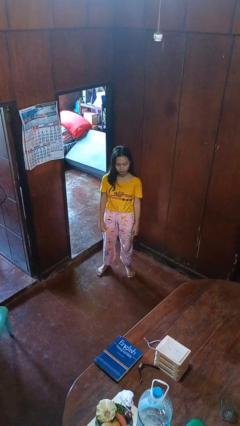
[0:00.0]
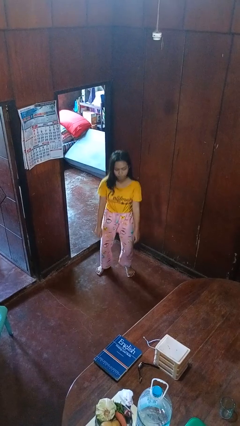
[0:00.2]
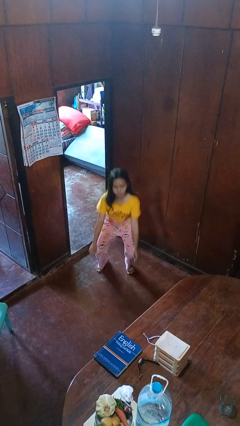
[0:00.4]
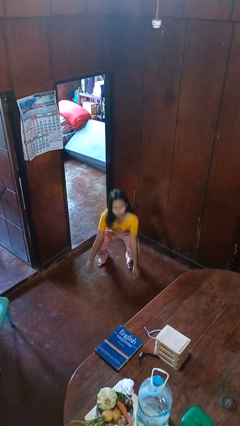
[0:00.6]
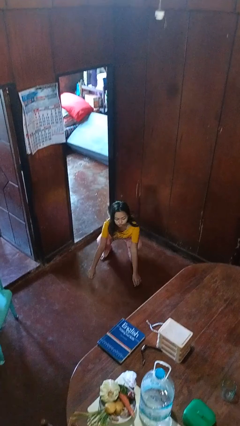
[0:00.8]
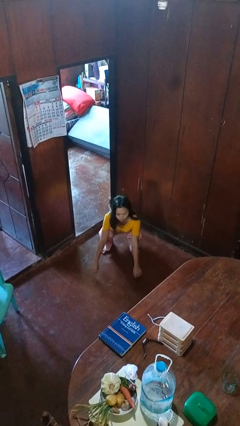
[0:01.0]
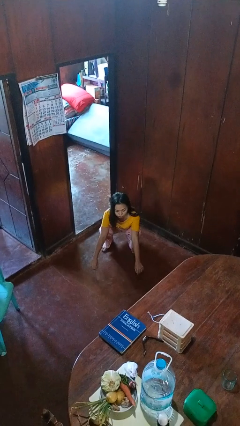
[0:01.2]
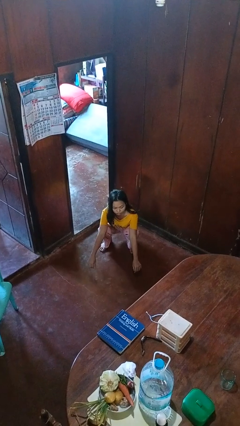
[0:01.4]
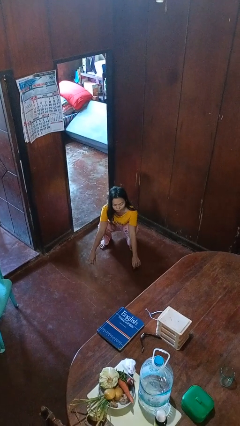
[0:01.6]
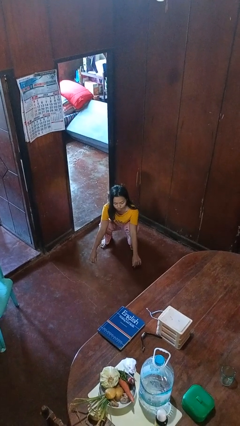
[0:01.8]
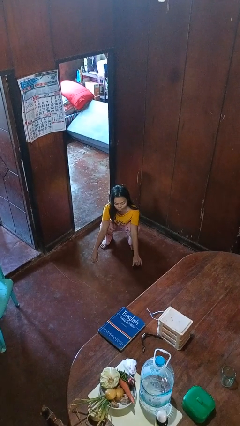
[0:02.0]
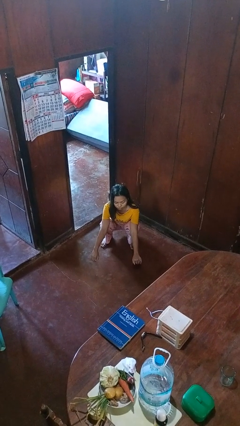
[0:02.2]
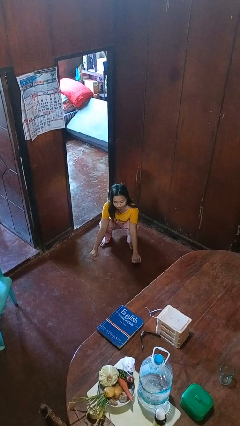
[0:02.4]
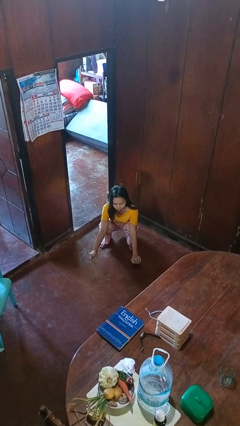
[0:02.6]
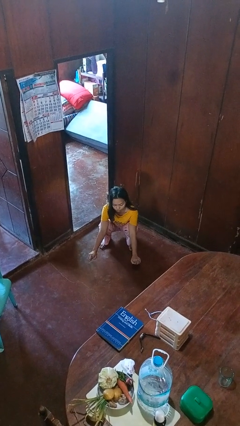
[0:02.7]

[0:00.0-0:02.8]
person squats

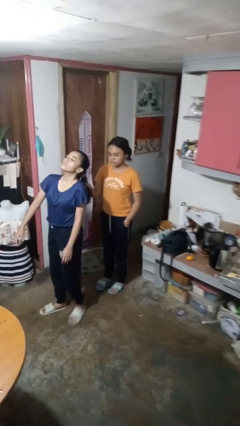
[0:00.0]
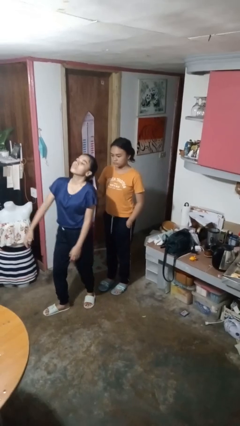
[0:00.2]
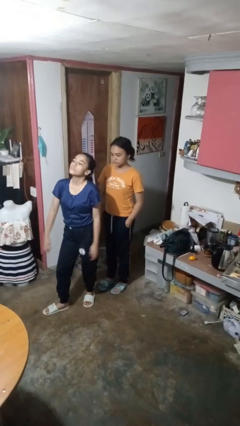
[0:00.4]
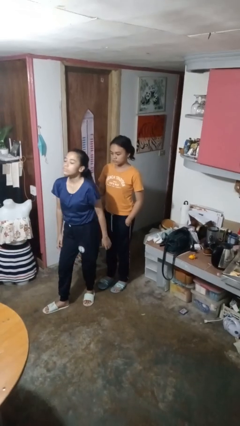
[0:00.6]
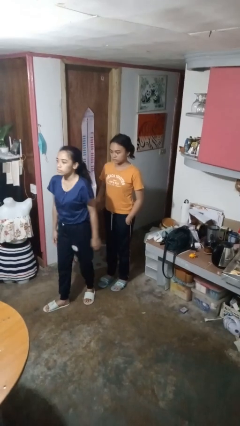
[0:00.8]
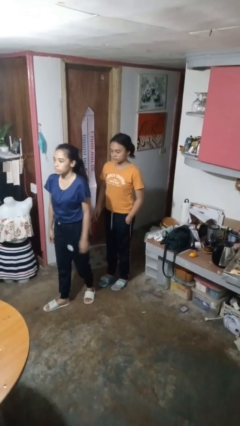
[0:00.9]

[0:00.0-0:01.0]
person grabs person by hair

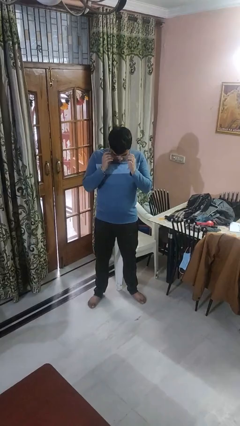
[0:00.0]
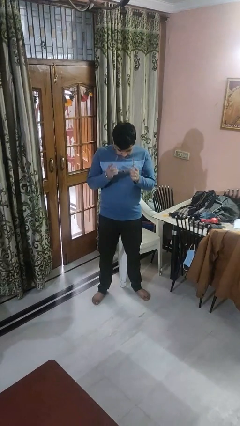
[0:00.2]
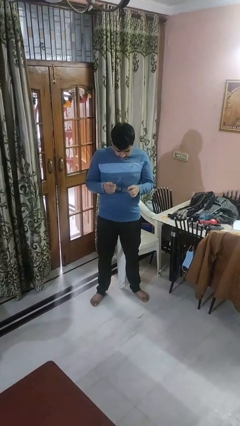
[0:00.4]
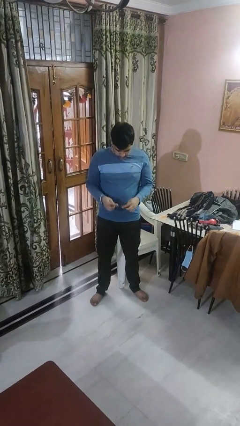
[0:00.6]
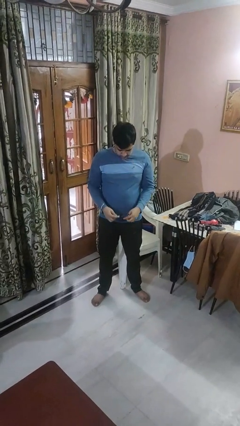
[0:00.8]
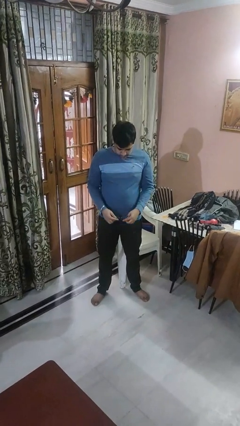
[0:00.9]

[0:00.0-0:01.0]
person takes off glasses

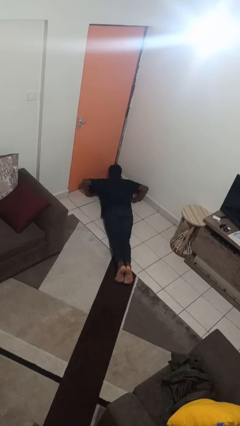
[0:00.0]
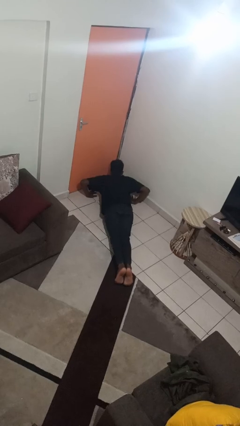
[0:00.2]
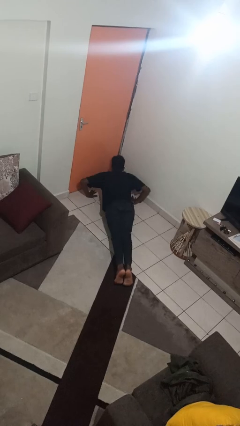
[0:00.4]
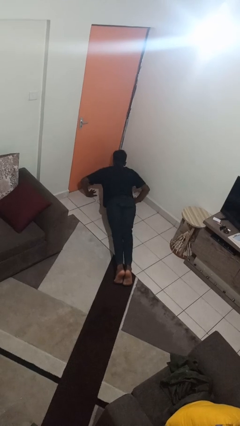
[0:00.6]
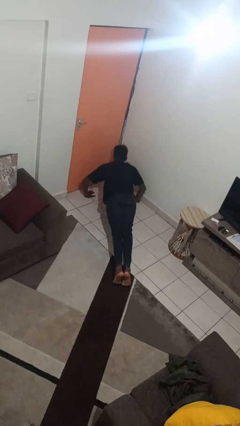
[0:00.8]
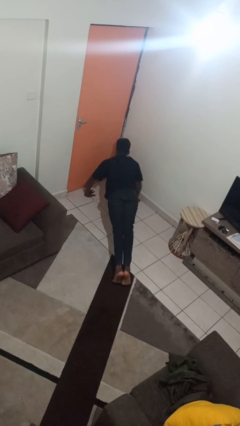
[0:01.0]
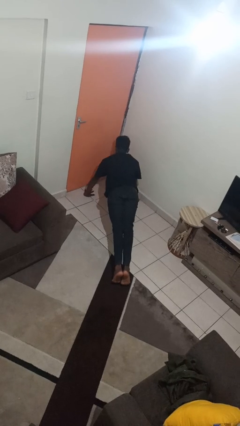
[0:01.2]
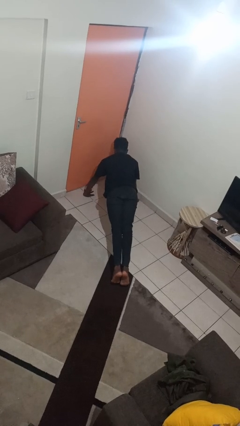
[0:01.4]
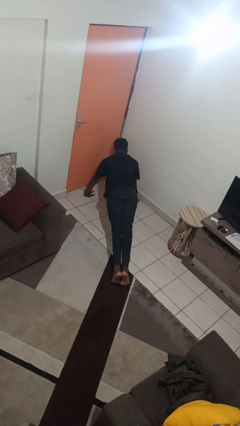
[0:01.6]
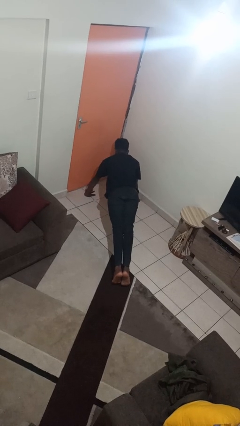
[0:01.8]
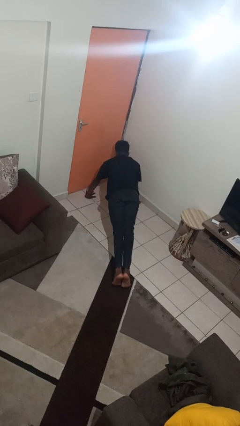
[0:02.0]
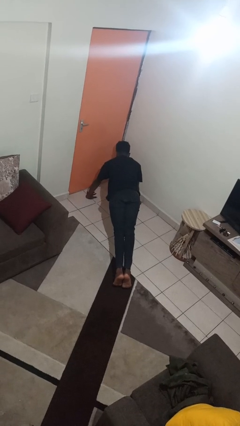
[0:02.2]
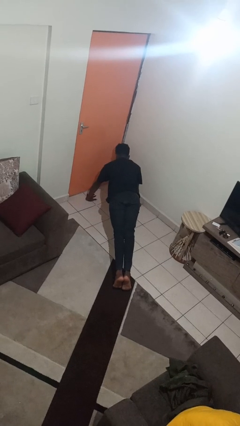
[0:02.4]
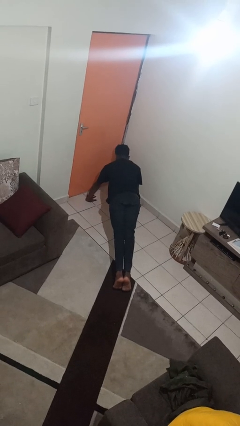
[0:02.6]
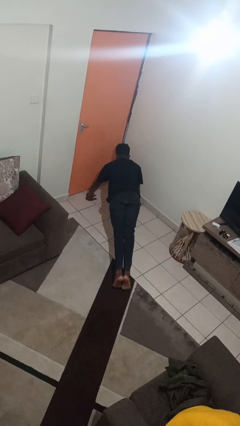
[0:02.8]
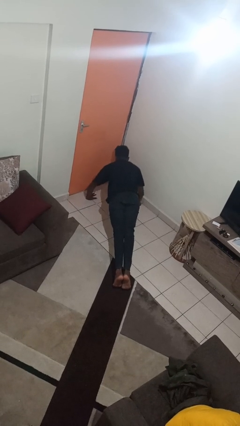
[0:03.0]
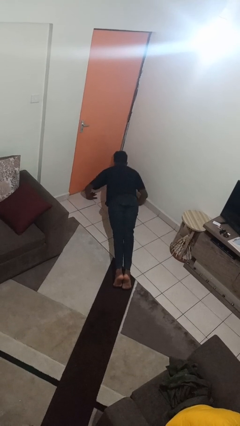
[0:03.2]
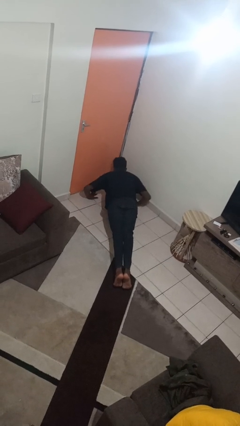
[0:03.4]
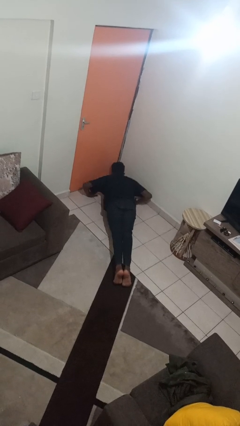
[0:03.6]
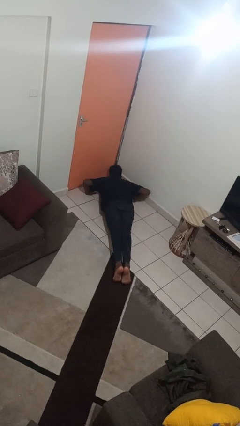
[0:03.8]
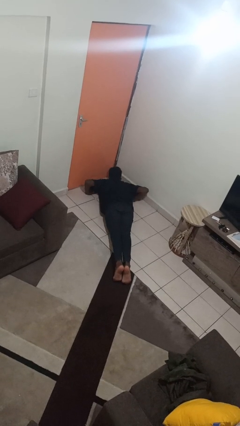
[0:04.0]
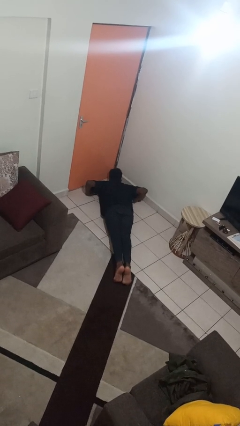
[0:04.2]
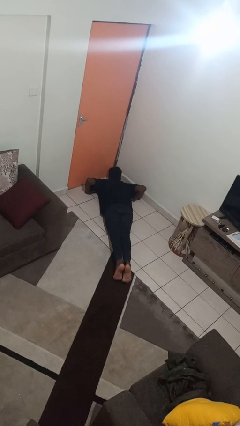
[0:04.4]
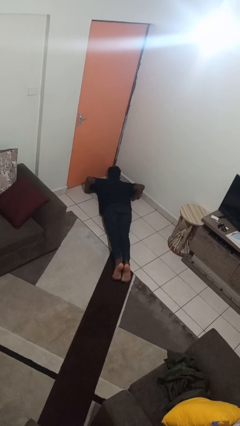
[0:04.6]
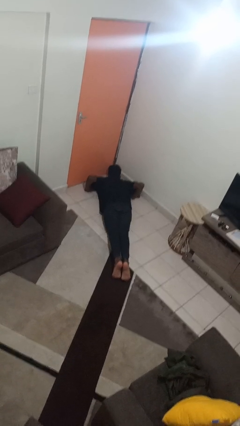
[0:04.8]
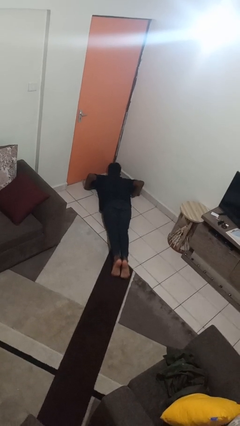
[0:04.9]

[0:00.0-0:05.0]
person exercises with pushup

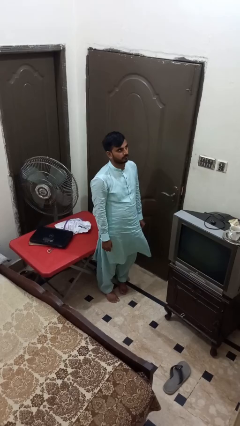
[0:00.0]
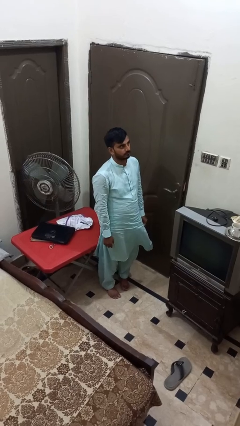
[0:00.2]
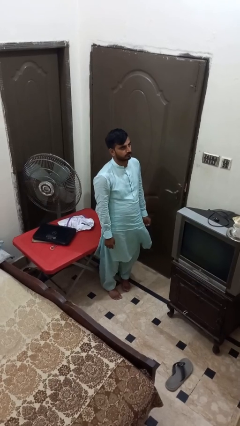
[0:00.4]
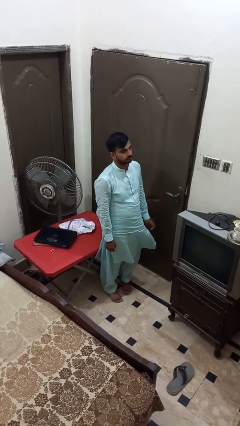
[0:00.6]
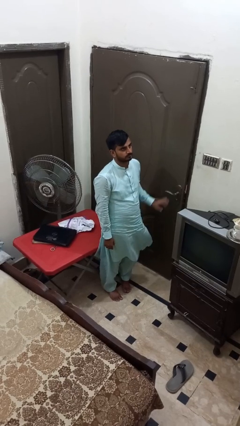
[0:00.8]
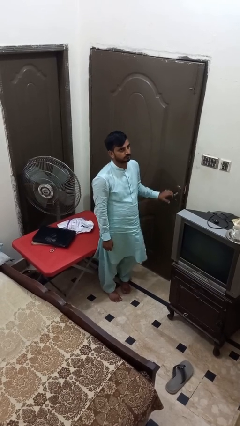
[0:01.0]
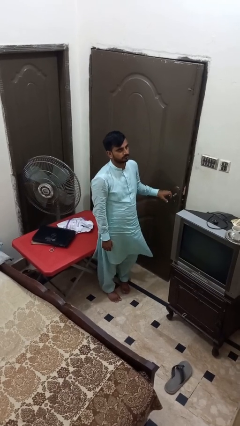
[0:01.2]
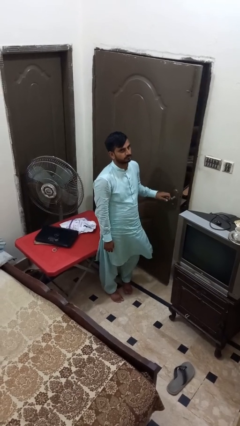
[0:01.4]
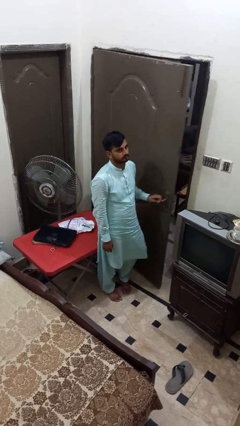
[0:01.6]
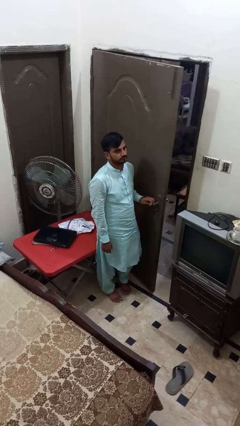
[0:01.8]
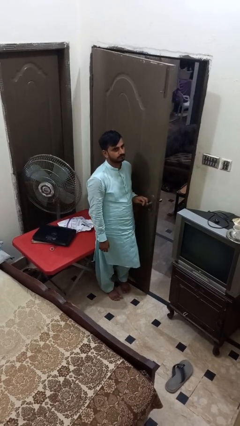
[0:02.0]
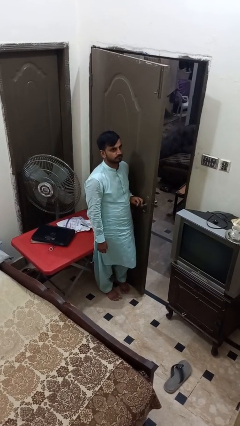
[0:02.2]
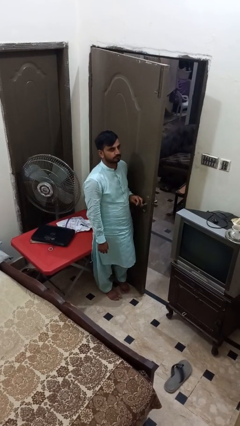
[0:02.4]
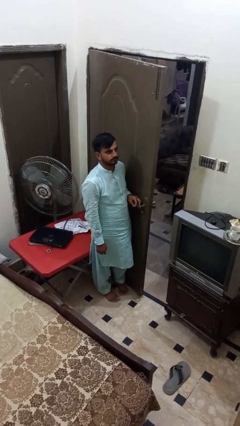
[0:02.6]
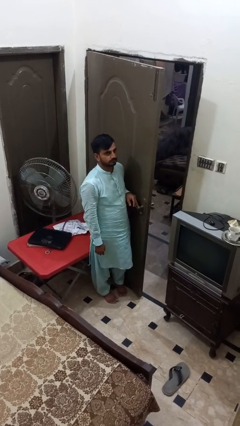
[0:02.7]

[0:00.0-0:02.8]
person opens facility door

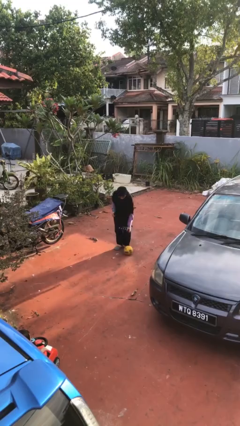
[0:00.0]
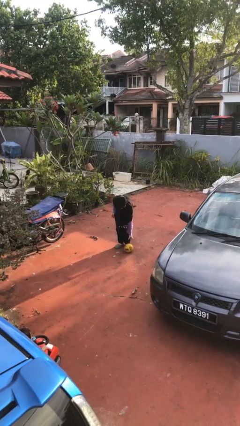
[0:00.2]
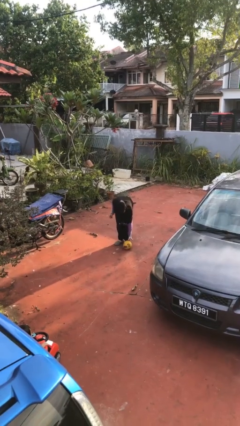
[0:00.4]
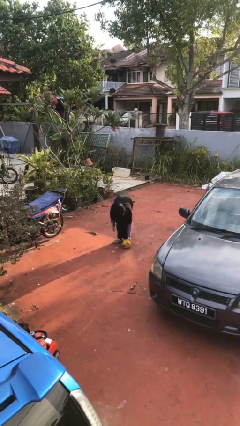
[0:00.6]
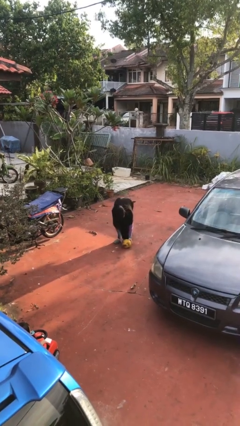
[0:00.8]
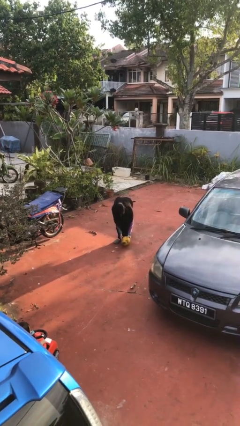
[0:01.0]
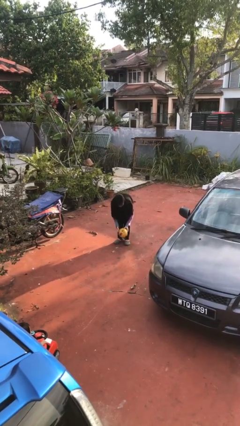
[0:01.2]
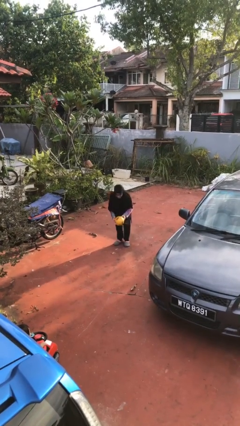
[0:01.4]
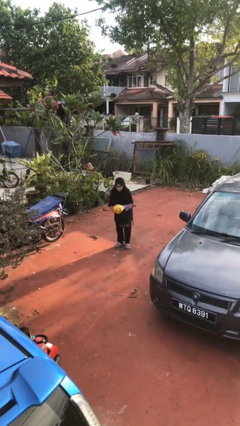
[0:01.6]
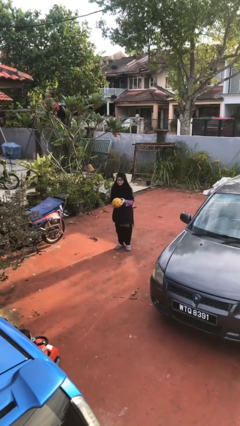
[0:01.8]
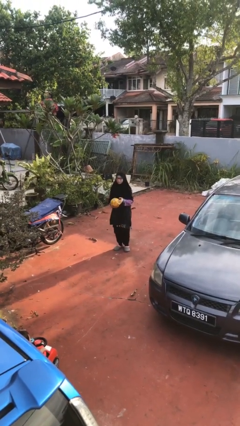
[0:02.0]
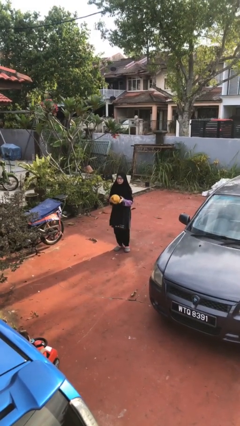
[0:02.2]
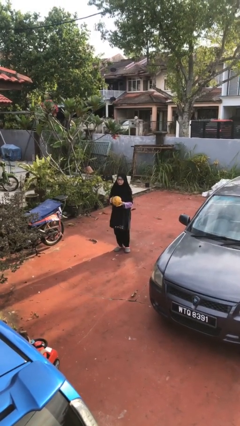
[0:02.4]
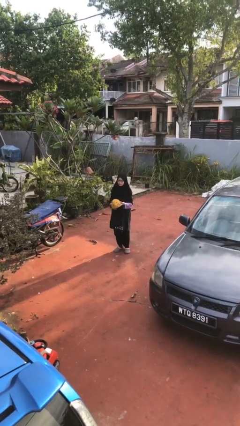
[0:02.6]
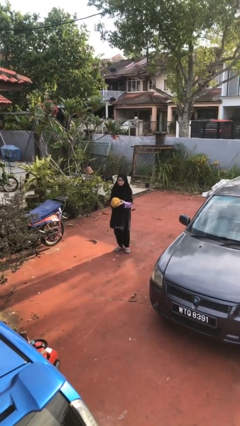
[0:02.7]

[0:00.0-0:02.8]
person picks up object from floor

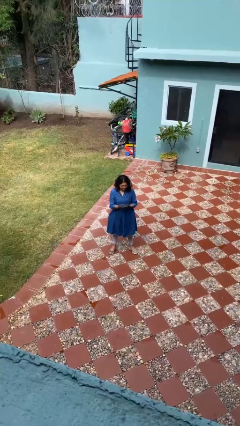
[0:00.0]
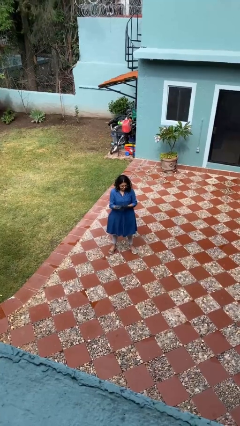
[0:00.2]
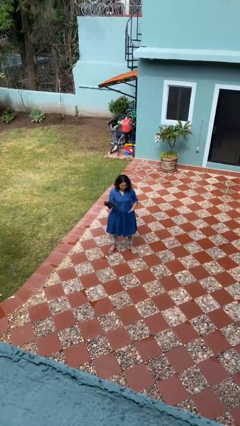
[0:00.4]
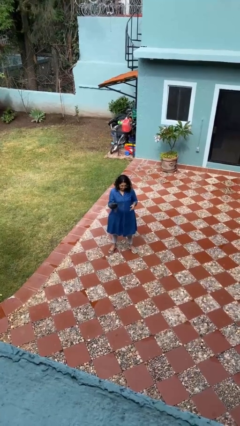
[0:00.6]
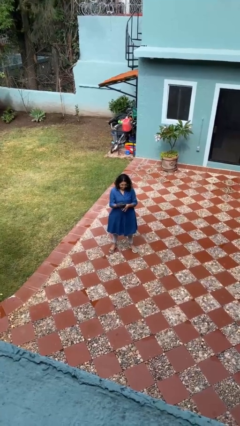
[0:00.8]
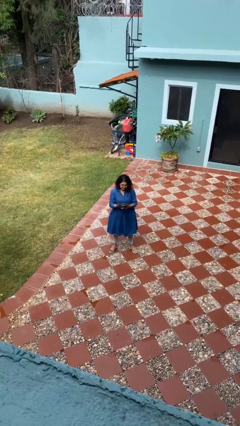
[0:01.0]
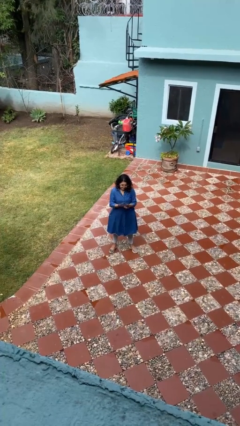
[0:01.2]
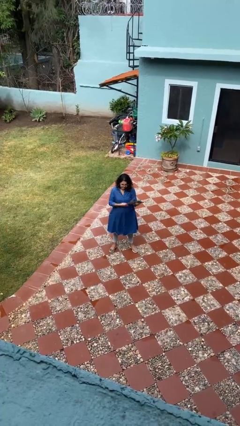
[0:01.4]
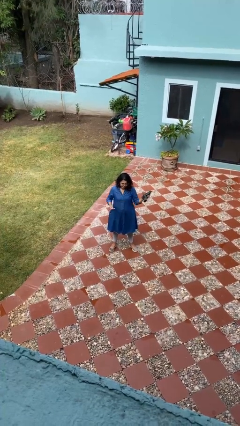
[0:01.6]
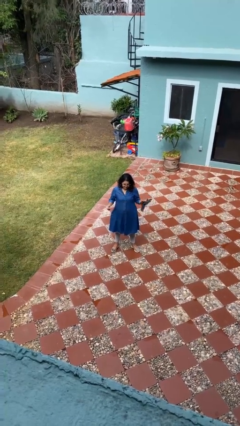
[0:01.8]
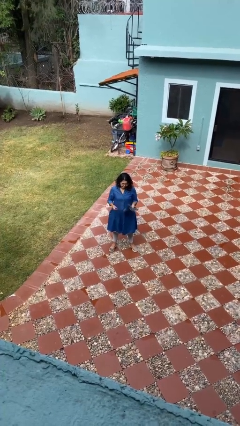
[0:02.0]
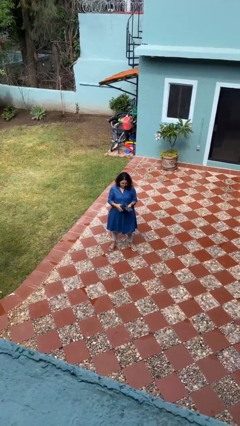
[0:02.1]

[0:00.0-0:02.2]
person takes off gloves
